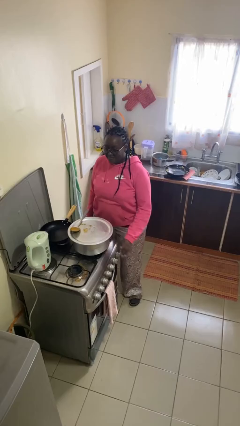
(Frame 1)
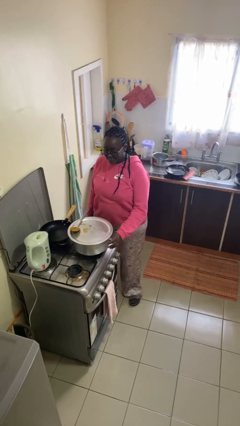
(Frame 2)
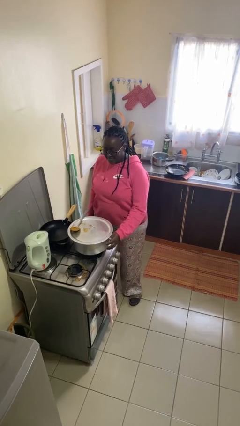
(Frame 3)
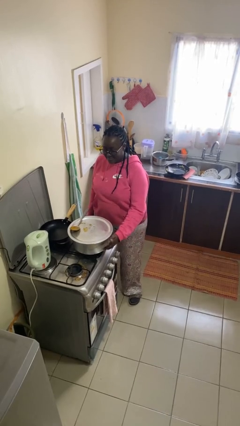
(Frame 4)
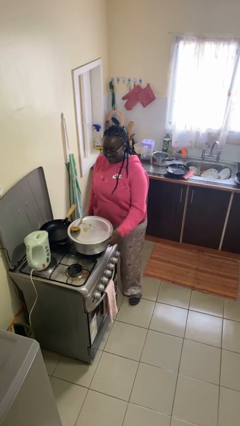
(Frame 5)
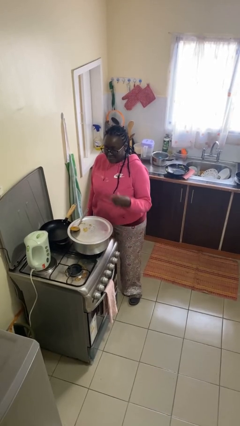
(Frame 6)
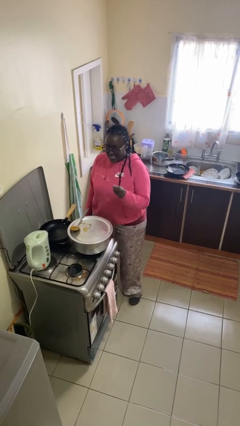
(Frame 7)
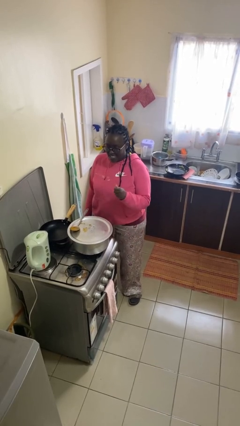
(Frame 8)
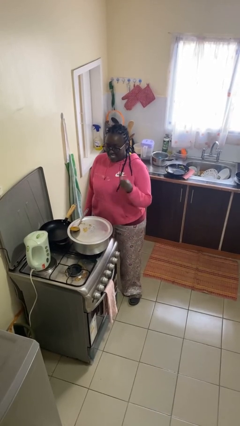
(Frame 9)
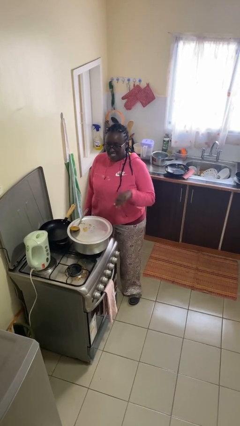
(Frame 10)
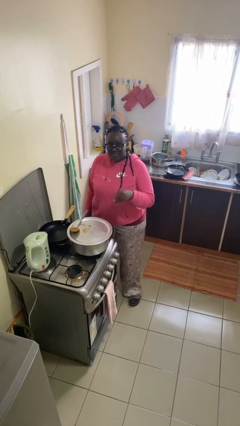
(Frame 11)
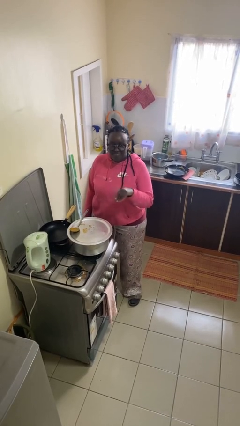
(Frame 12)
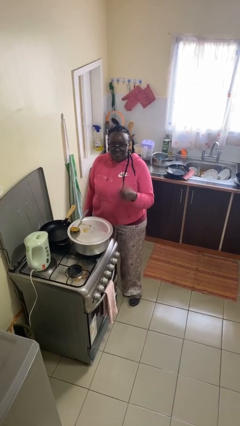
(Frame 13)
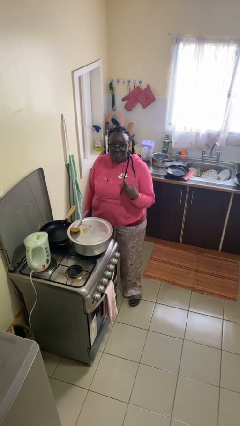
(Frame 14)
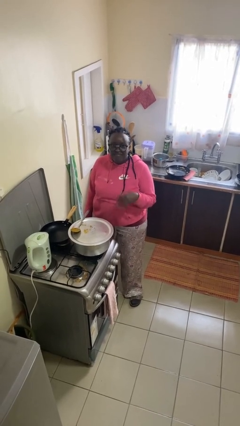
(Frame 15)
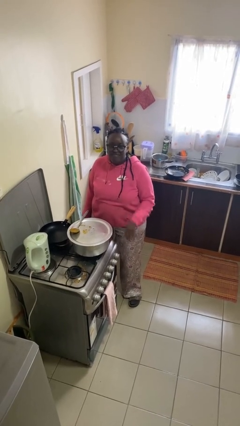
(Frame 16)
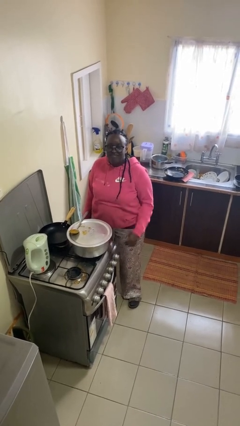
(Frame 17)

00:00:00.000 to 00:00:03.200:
person burns hand

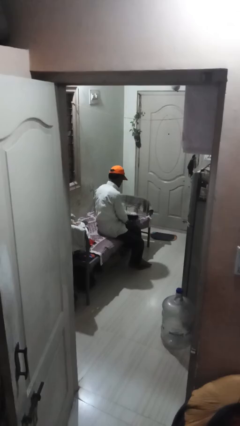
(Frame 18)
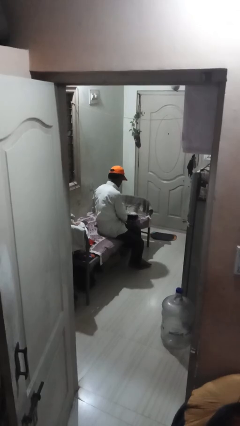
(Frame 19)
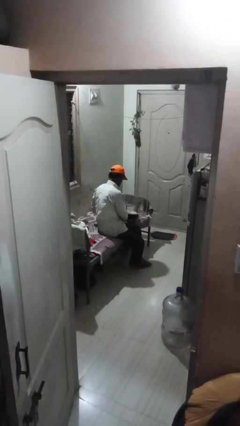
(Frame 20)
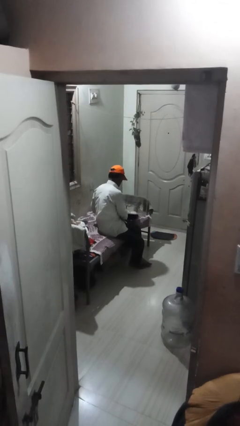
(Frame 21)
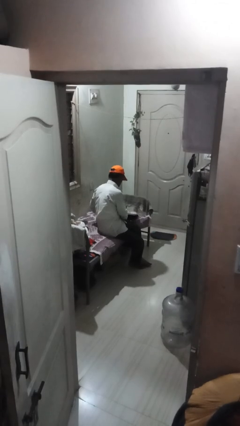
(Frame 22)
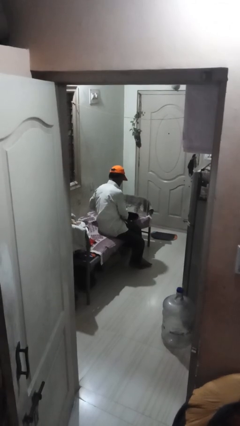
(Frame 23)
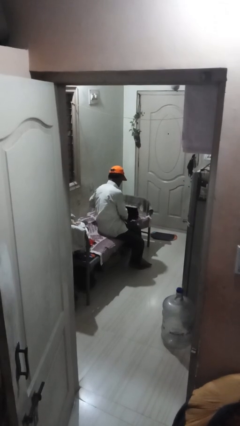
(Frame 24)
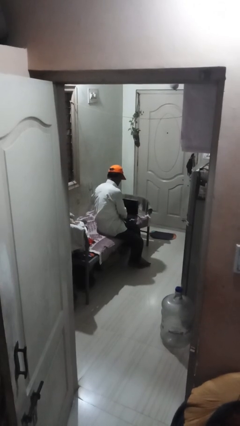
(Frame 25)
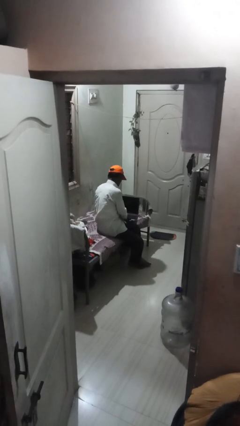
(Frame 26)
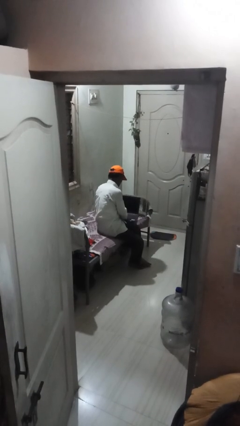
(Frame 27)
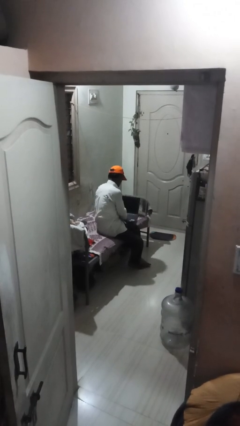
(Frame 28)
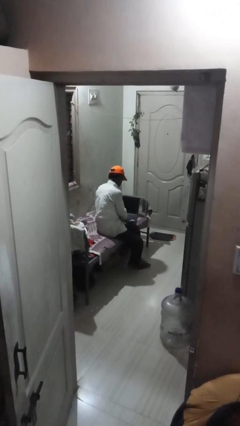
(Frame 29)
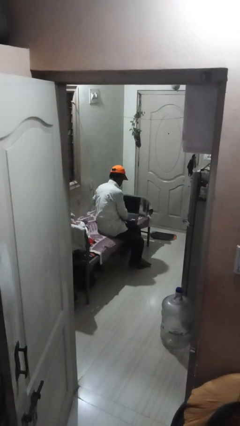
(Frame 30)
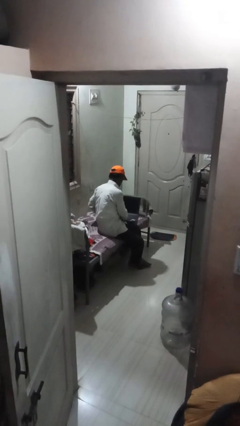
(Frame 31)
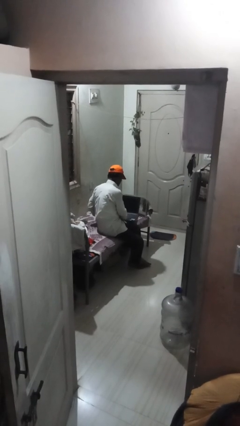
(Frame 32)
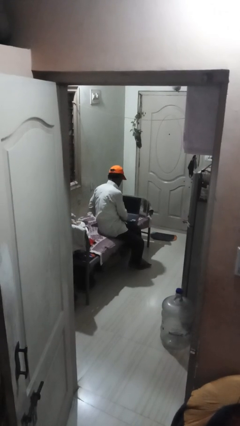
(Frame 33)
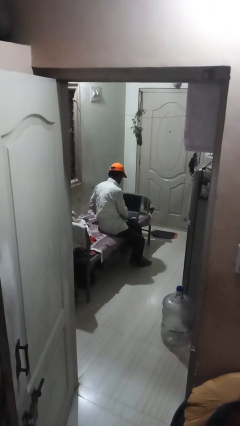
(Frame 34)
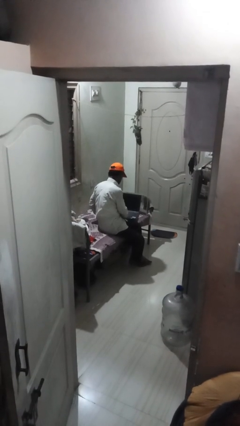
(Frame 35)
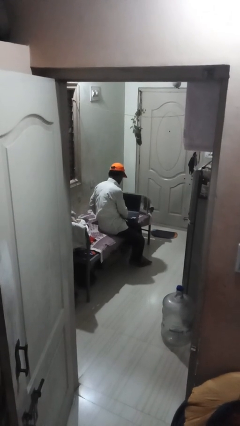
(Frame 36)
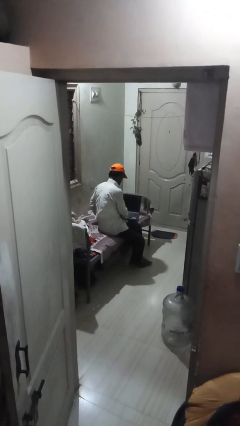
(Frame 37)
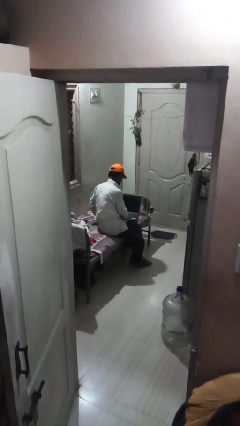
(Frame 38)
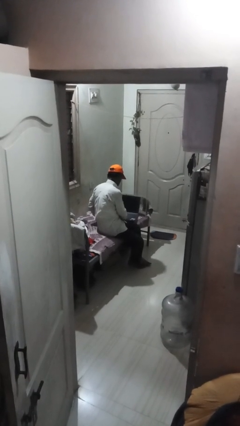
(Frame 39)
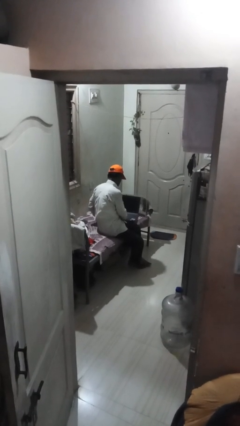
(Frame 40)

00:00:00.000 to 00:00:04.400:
person opens laptop

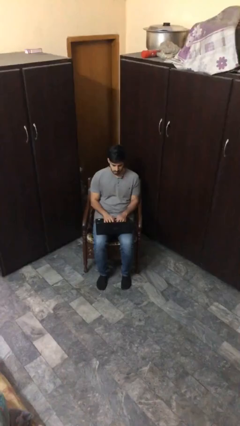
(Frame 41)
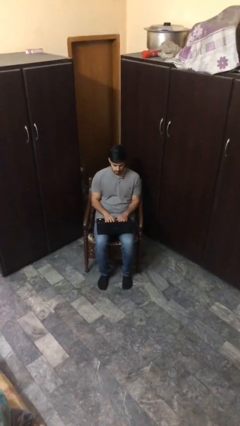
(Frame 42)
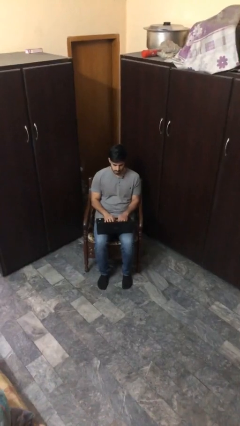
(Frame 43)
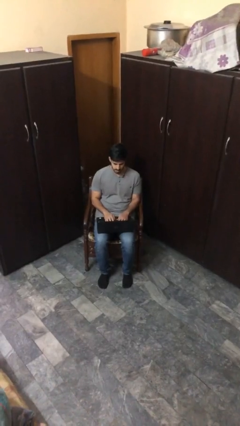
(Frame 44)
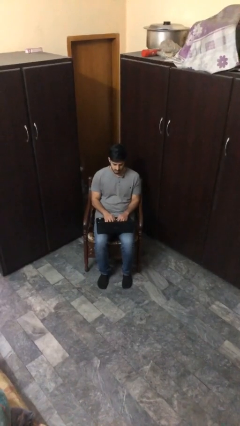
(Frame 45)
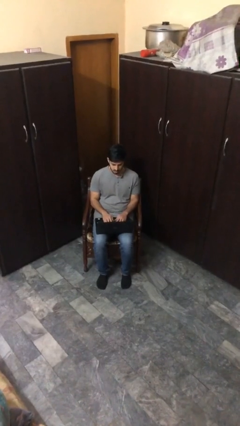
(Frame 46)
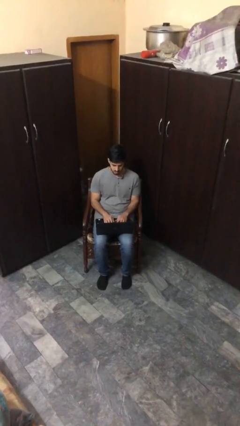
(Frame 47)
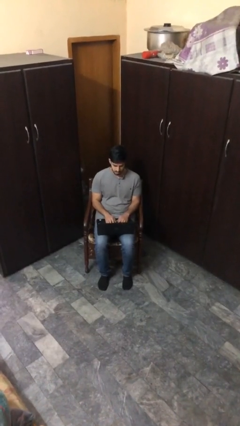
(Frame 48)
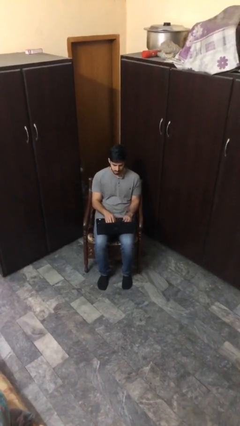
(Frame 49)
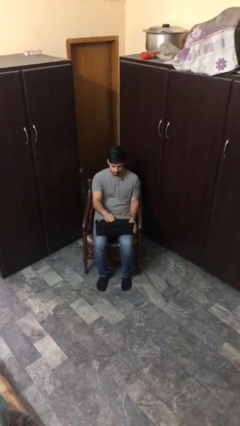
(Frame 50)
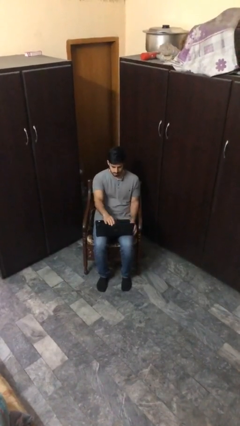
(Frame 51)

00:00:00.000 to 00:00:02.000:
person interacts with laptop

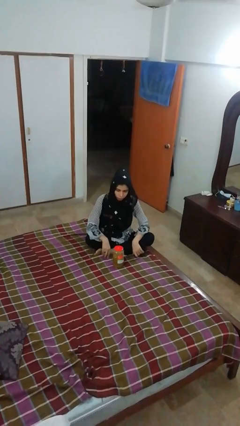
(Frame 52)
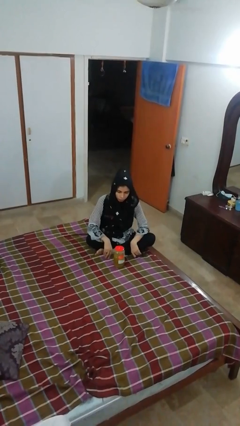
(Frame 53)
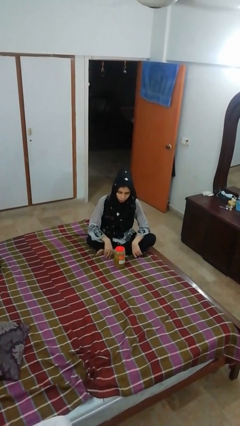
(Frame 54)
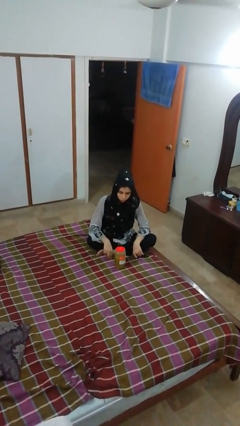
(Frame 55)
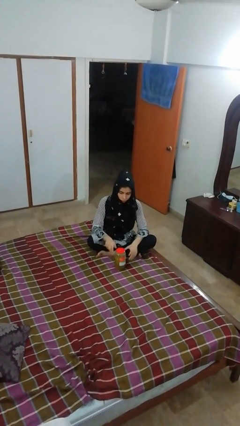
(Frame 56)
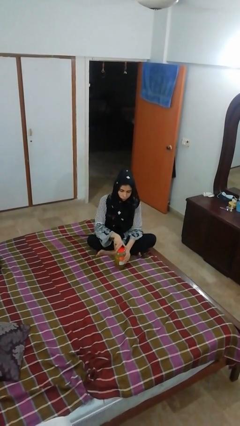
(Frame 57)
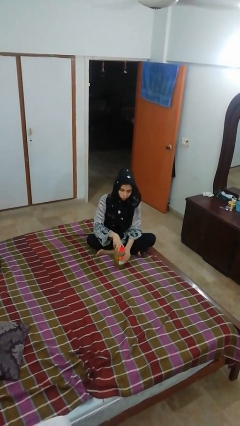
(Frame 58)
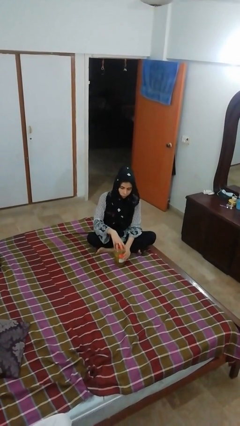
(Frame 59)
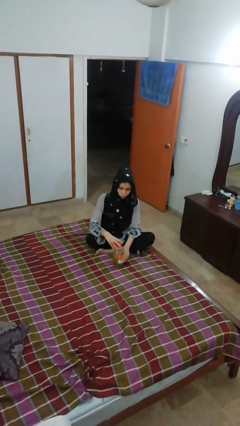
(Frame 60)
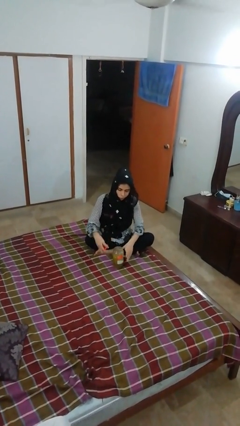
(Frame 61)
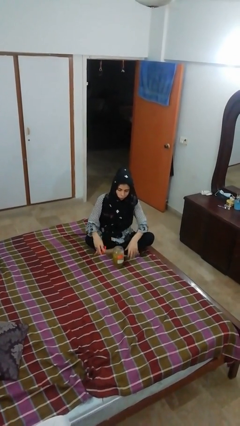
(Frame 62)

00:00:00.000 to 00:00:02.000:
person opens jar

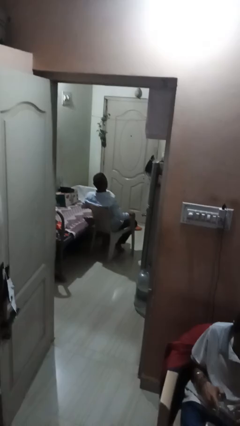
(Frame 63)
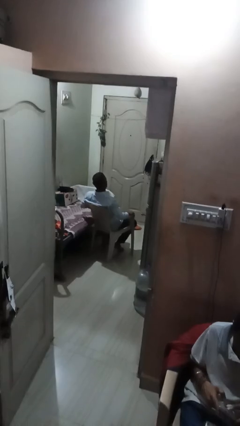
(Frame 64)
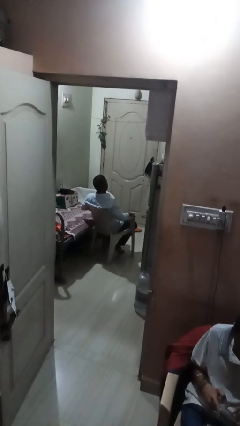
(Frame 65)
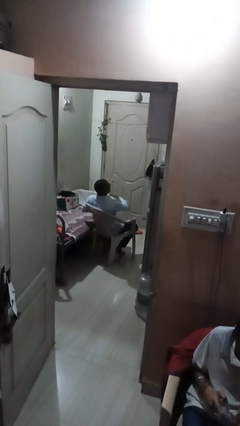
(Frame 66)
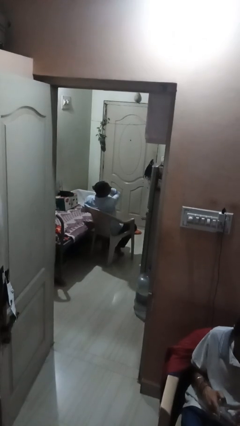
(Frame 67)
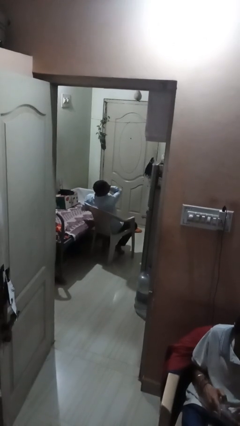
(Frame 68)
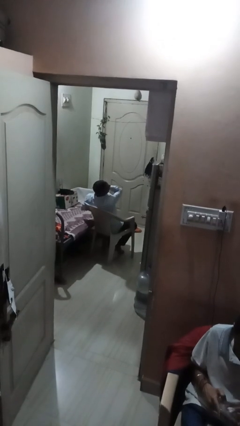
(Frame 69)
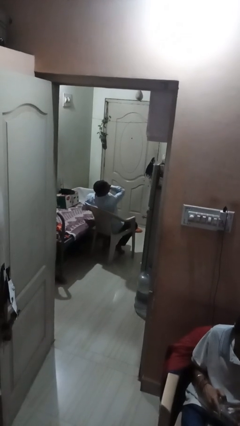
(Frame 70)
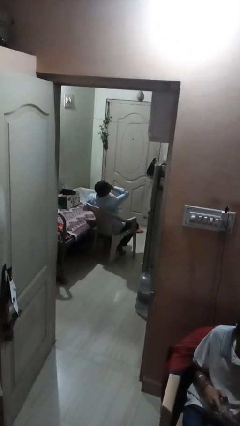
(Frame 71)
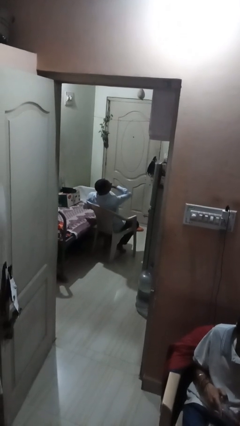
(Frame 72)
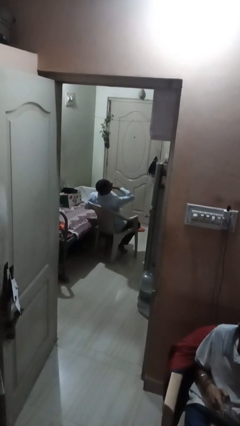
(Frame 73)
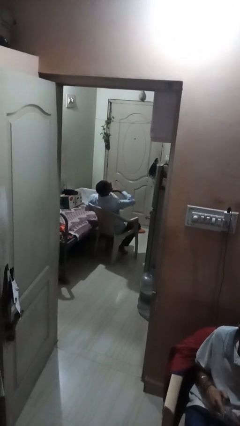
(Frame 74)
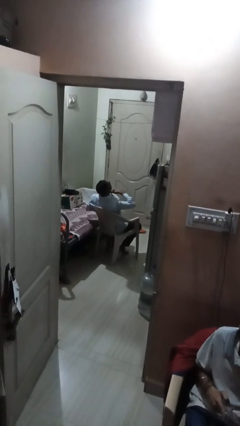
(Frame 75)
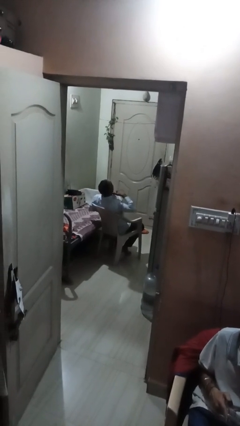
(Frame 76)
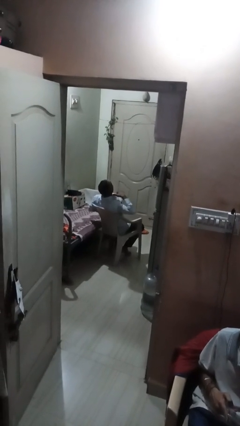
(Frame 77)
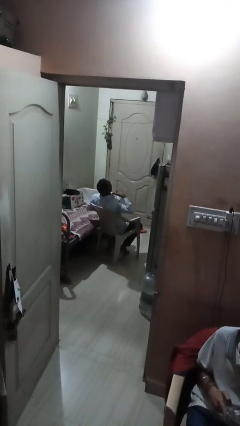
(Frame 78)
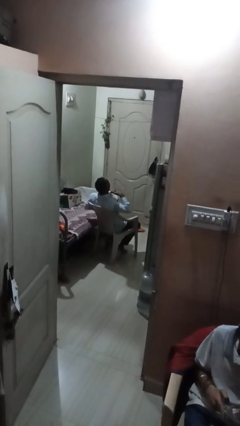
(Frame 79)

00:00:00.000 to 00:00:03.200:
person gestures cut

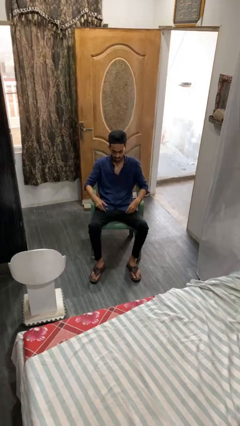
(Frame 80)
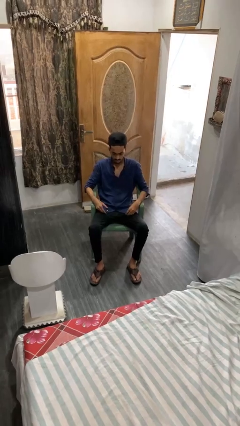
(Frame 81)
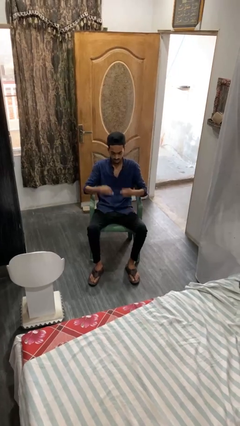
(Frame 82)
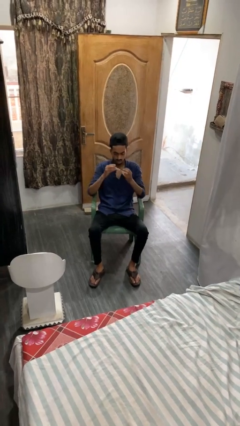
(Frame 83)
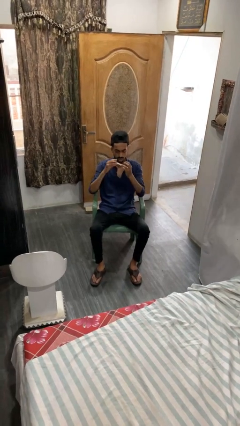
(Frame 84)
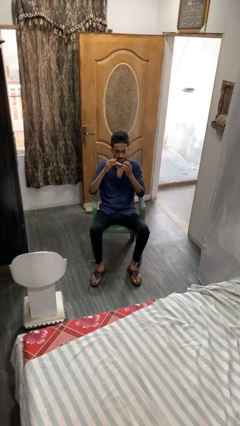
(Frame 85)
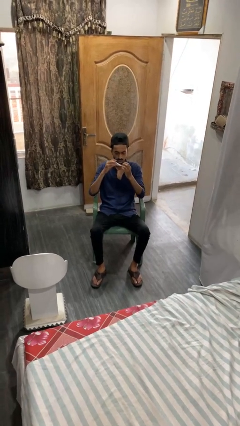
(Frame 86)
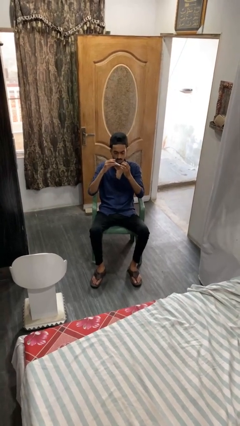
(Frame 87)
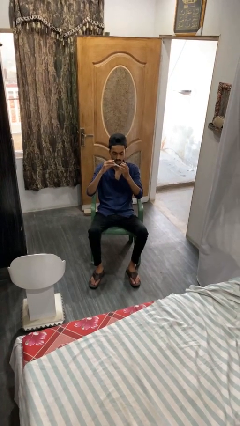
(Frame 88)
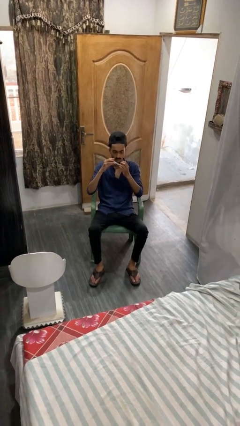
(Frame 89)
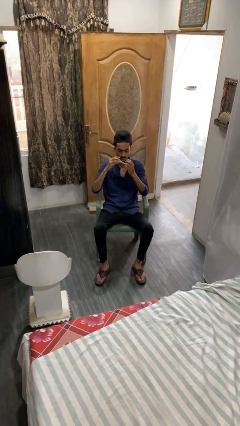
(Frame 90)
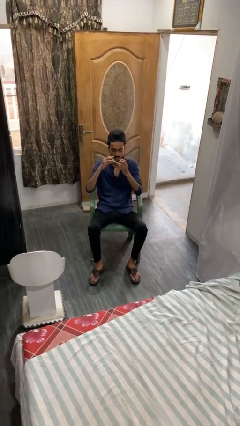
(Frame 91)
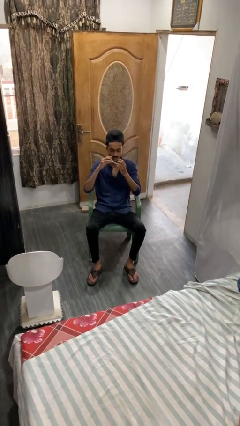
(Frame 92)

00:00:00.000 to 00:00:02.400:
person clips fingernails
